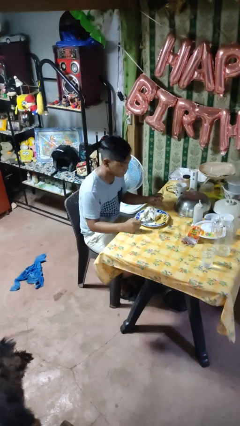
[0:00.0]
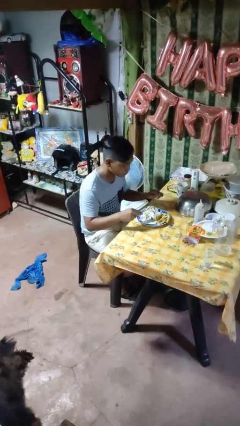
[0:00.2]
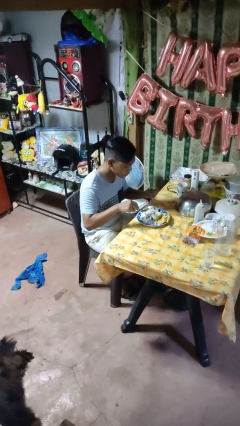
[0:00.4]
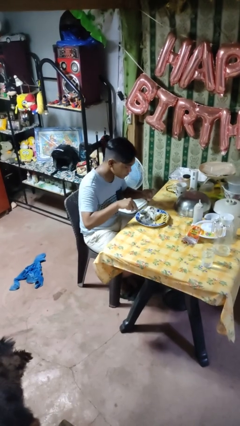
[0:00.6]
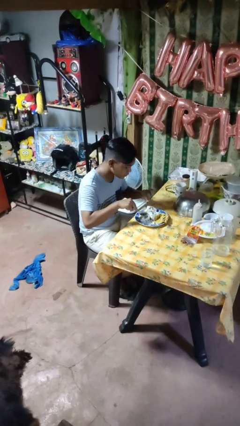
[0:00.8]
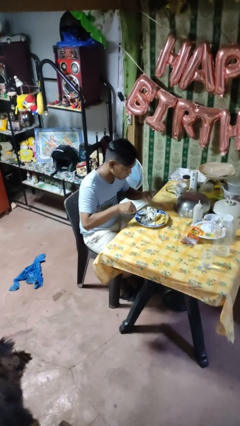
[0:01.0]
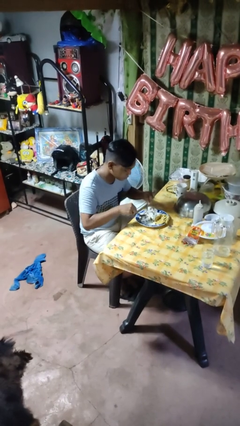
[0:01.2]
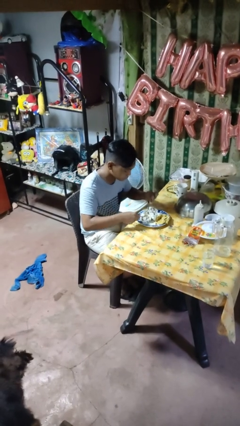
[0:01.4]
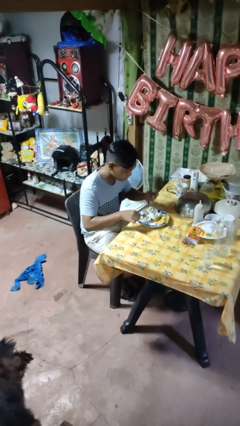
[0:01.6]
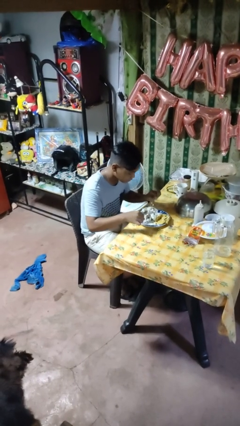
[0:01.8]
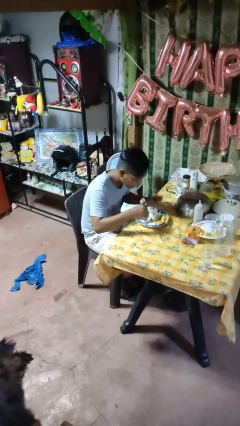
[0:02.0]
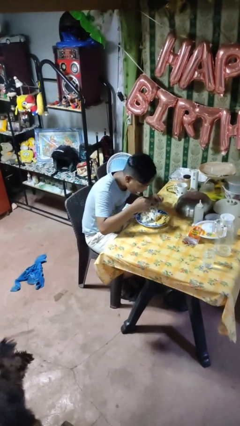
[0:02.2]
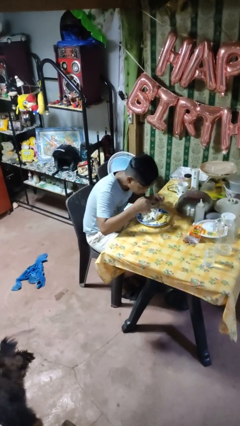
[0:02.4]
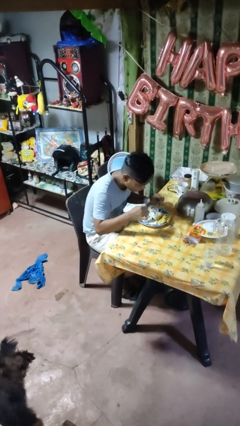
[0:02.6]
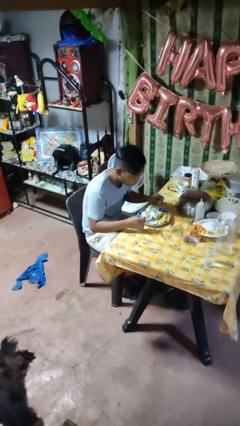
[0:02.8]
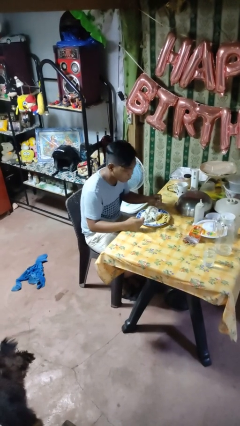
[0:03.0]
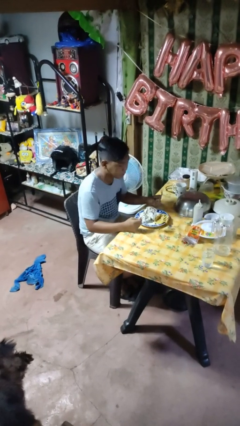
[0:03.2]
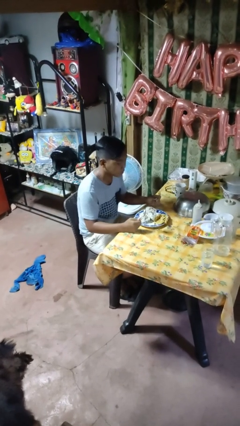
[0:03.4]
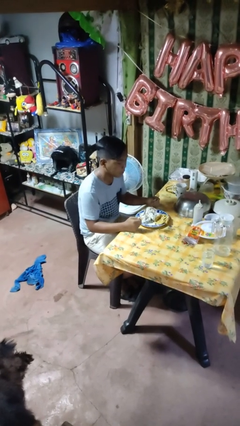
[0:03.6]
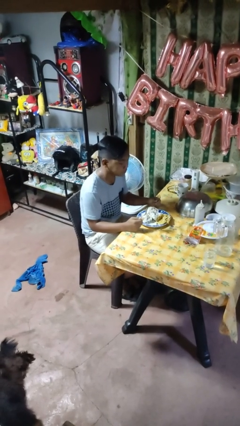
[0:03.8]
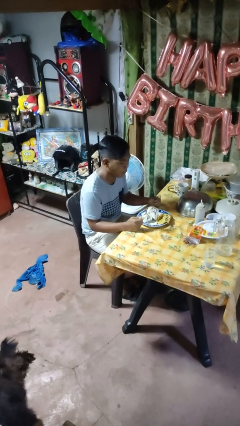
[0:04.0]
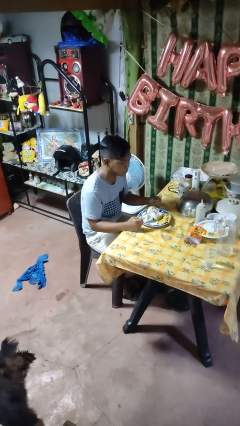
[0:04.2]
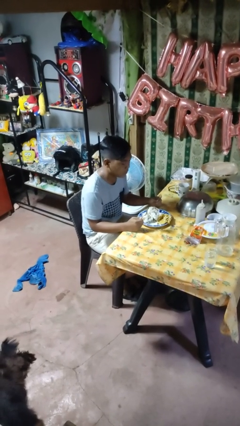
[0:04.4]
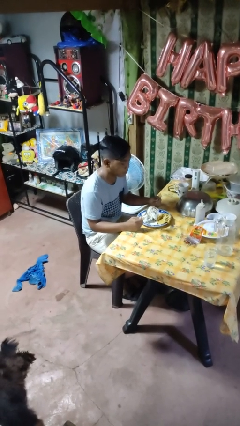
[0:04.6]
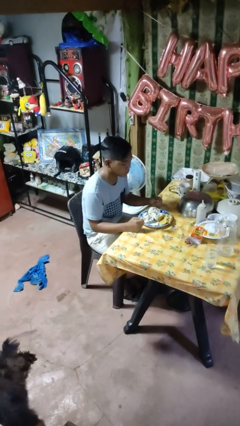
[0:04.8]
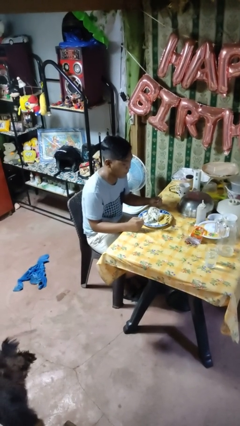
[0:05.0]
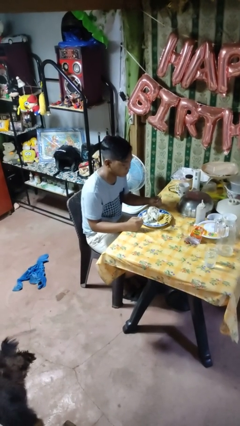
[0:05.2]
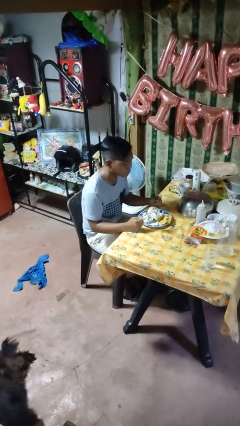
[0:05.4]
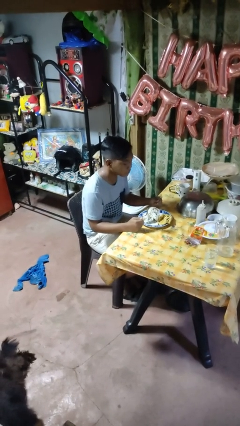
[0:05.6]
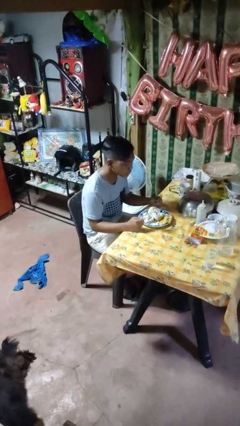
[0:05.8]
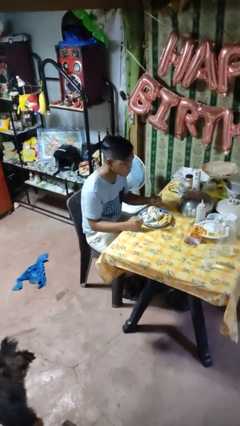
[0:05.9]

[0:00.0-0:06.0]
person eats with utensil

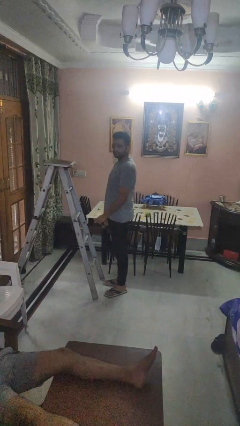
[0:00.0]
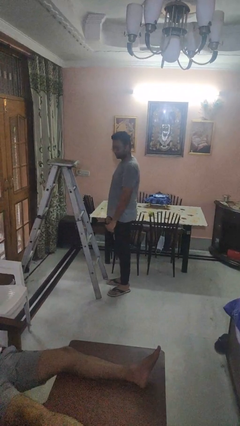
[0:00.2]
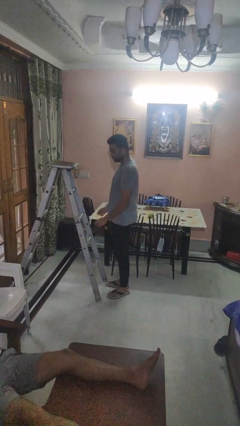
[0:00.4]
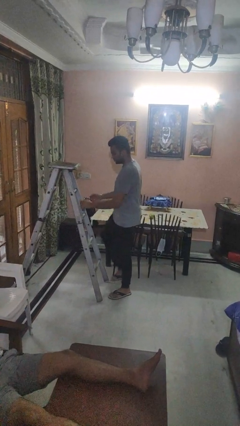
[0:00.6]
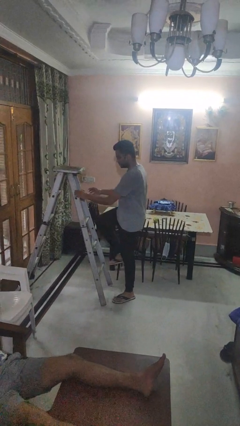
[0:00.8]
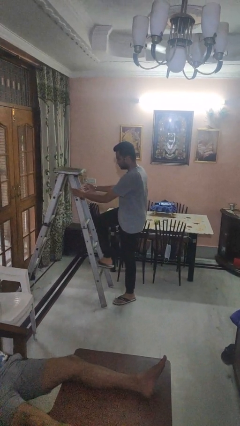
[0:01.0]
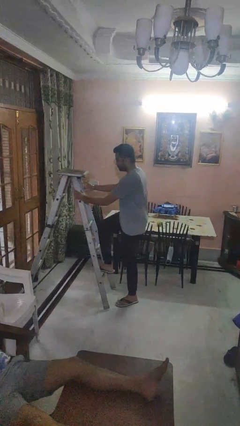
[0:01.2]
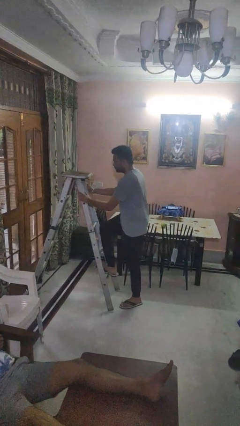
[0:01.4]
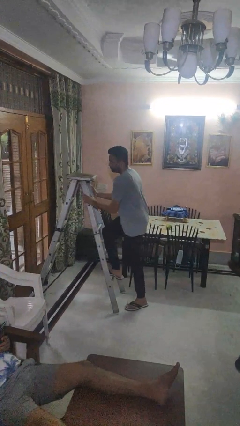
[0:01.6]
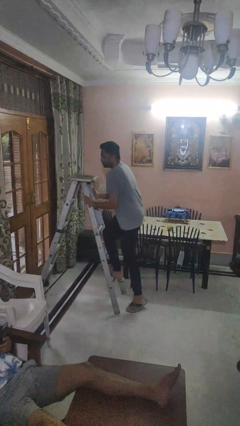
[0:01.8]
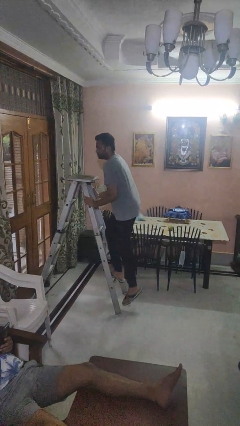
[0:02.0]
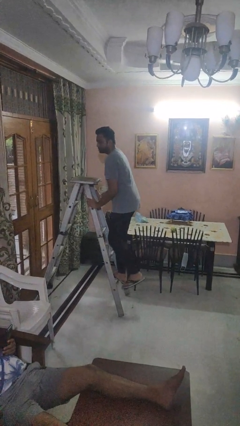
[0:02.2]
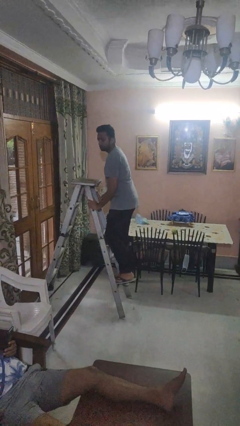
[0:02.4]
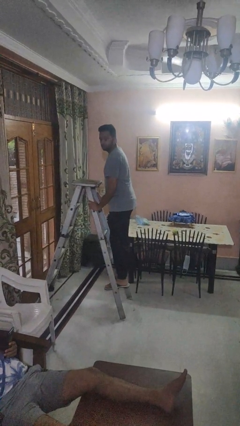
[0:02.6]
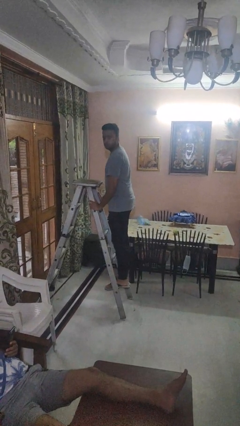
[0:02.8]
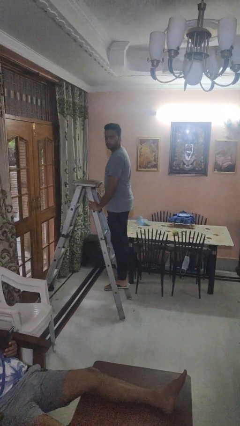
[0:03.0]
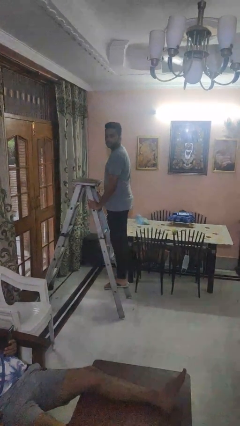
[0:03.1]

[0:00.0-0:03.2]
person climbs up ladder

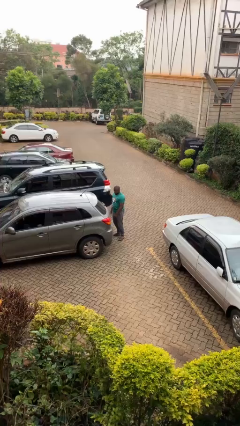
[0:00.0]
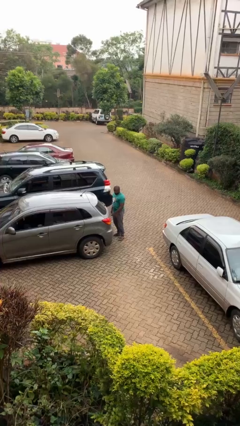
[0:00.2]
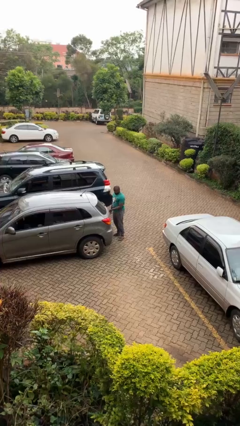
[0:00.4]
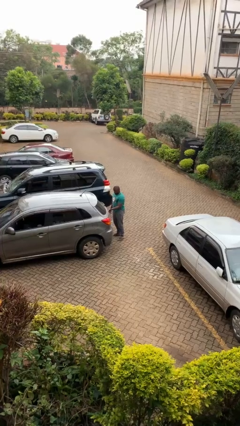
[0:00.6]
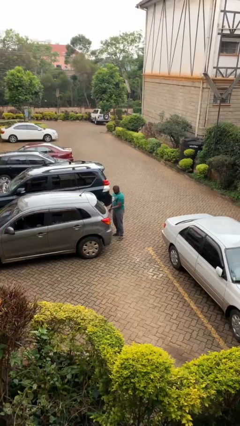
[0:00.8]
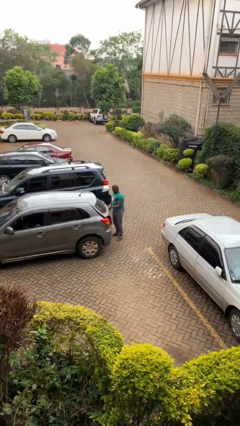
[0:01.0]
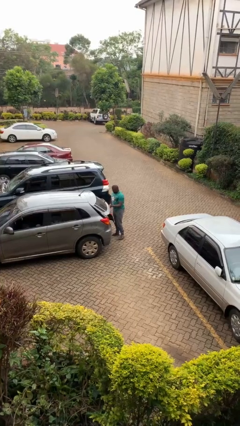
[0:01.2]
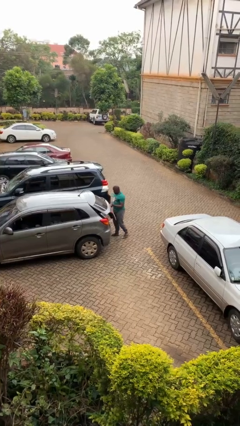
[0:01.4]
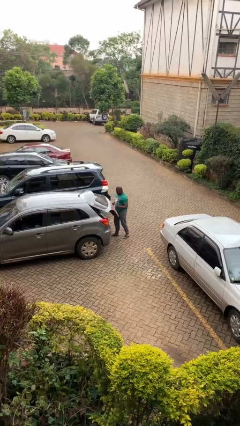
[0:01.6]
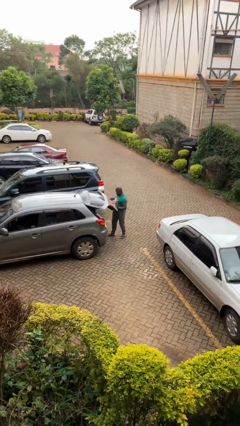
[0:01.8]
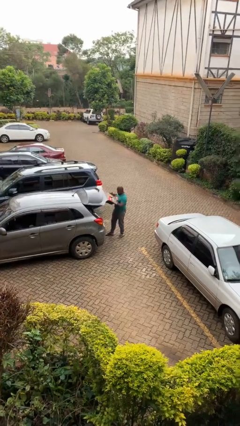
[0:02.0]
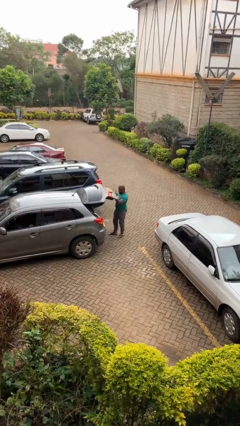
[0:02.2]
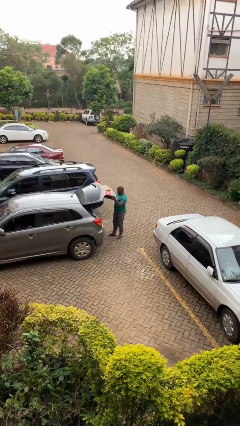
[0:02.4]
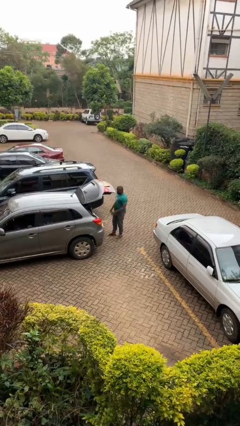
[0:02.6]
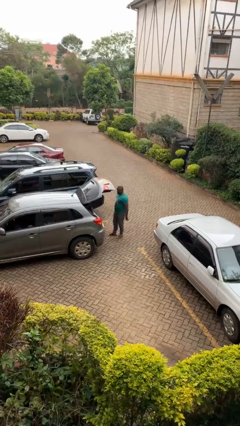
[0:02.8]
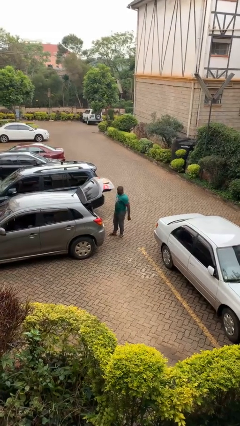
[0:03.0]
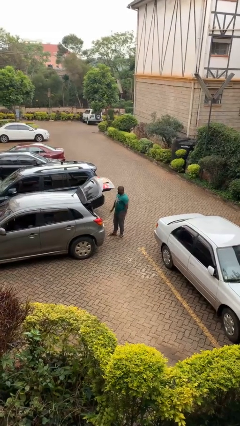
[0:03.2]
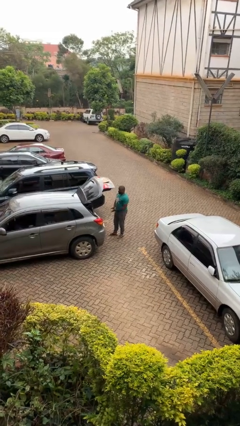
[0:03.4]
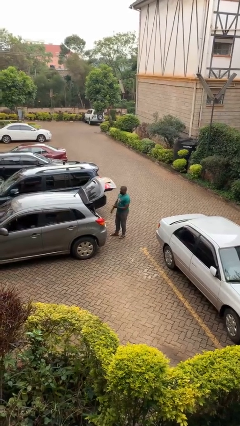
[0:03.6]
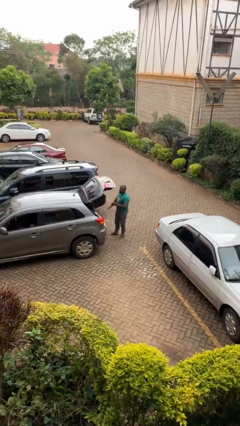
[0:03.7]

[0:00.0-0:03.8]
person opens car trunk

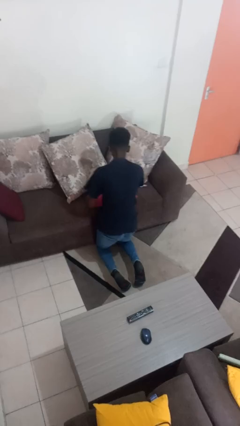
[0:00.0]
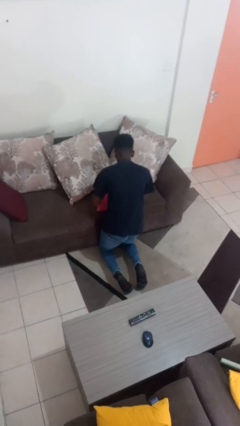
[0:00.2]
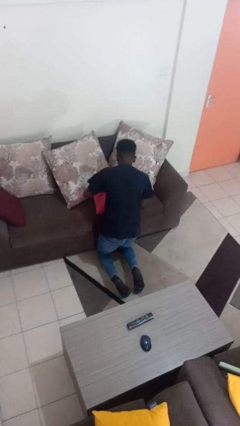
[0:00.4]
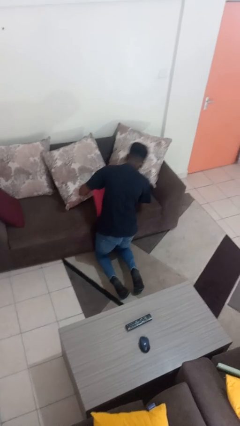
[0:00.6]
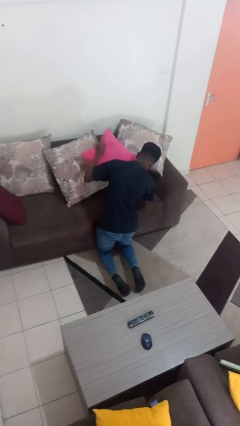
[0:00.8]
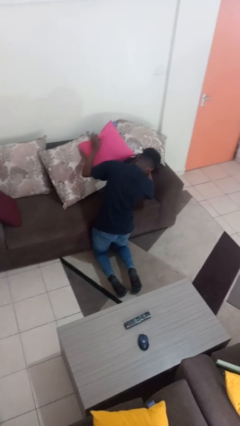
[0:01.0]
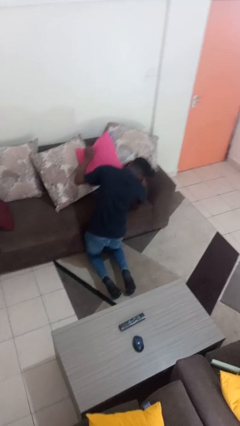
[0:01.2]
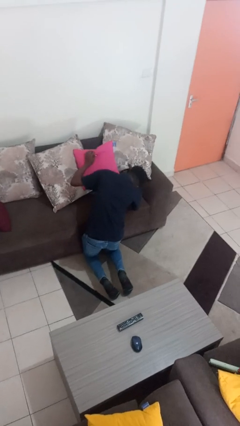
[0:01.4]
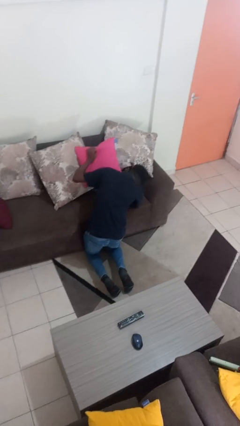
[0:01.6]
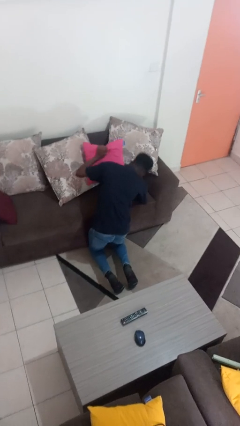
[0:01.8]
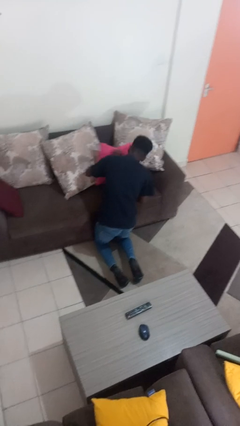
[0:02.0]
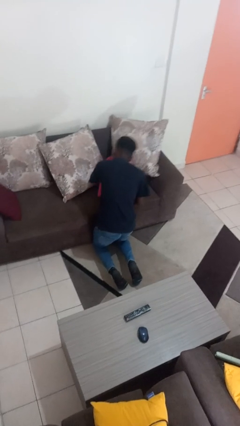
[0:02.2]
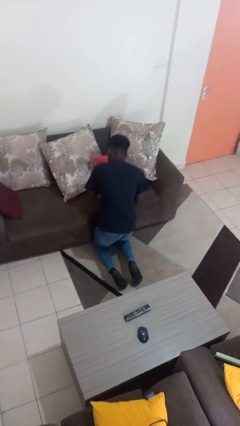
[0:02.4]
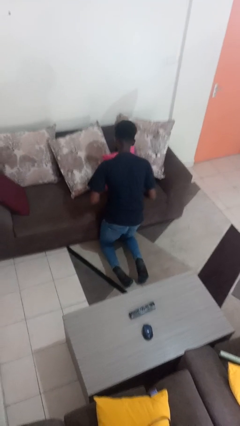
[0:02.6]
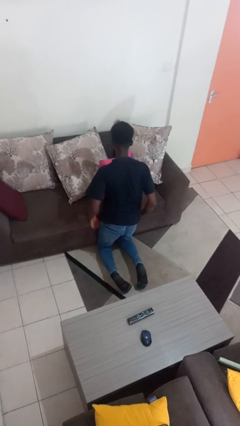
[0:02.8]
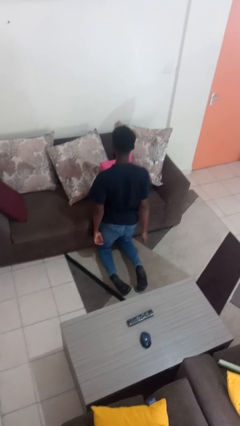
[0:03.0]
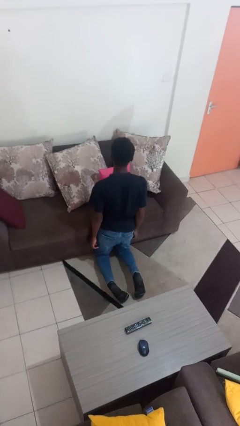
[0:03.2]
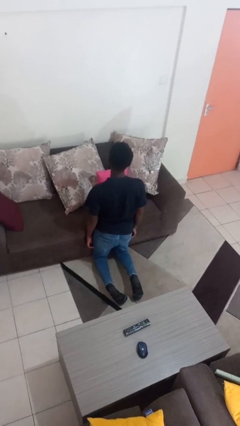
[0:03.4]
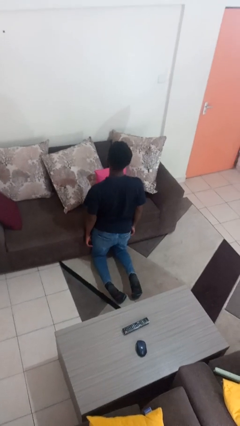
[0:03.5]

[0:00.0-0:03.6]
person searches in couch

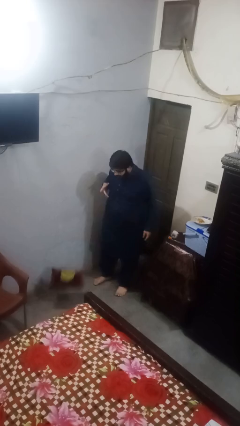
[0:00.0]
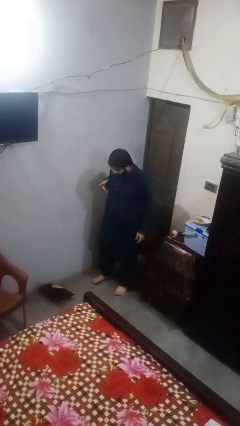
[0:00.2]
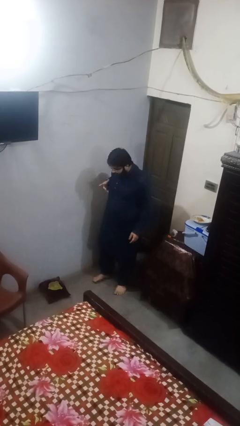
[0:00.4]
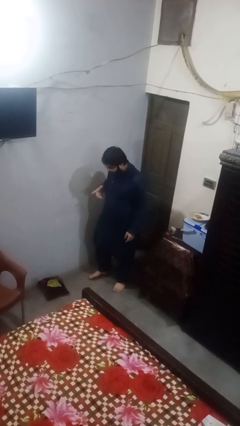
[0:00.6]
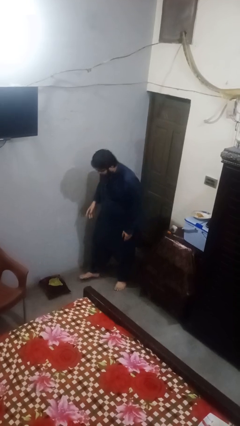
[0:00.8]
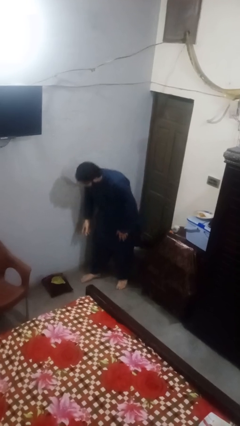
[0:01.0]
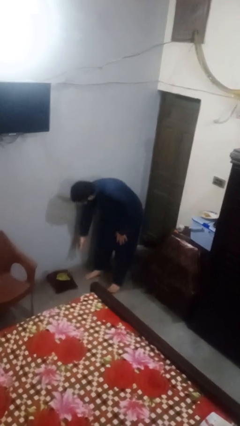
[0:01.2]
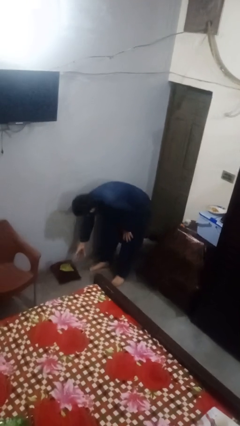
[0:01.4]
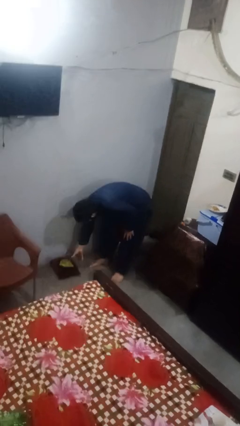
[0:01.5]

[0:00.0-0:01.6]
person throws object to ground
